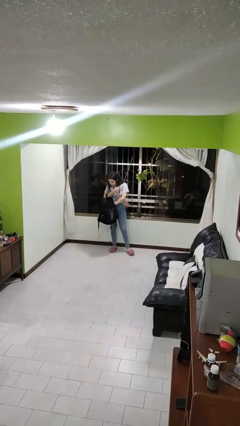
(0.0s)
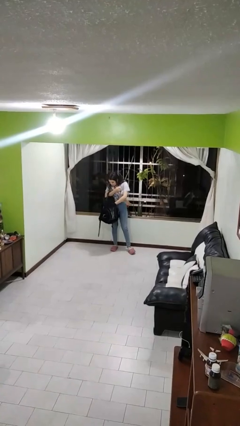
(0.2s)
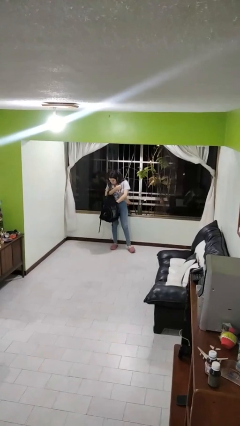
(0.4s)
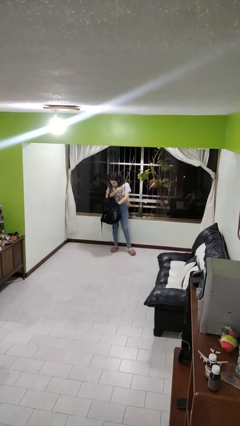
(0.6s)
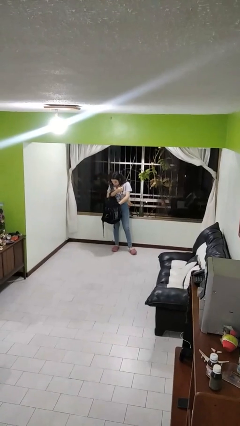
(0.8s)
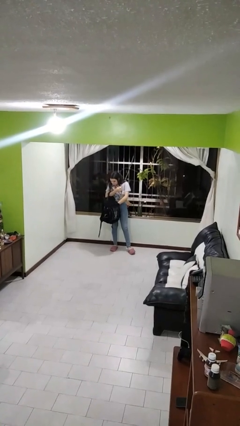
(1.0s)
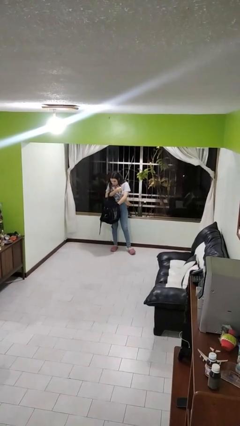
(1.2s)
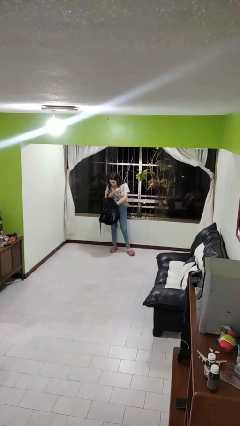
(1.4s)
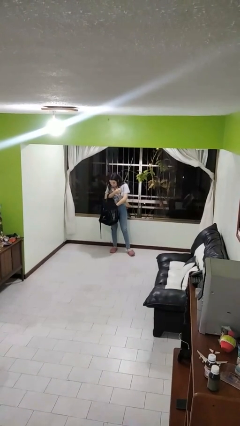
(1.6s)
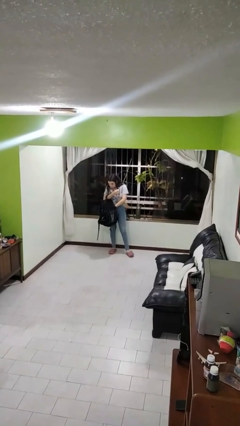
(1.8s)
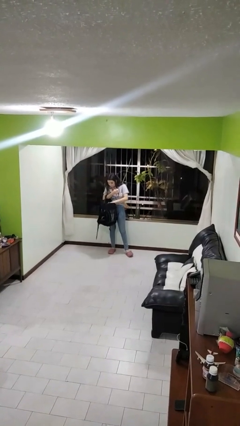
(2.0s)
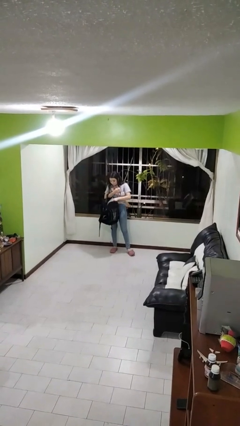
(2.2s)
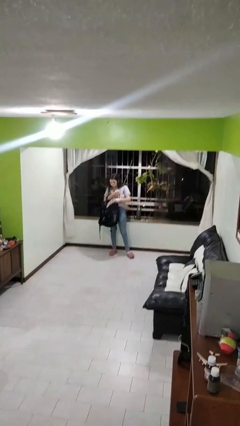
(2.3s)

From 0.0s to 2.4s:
person searches in backpack

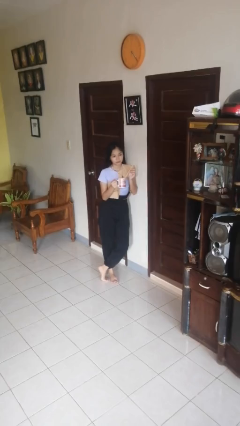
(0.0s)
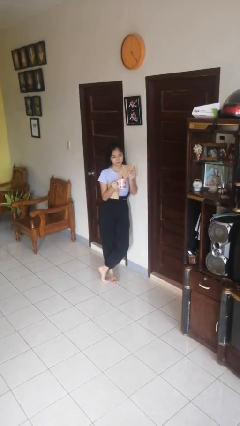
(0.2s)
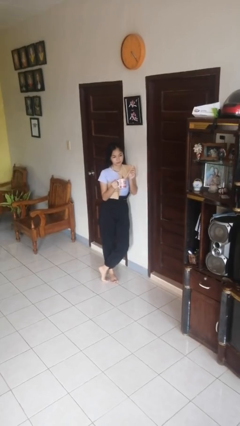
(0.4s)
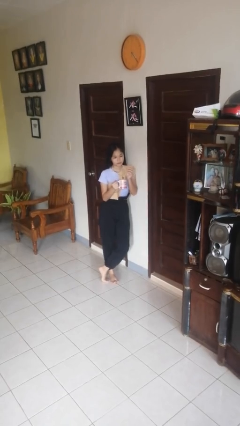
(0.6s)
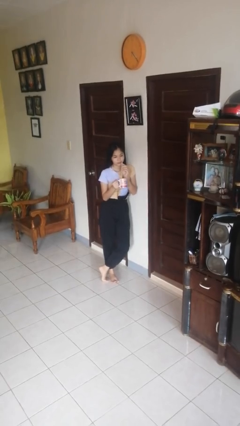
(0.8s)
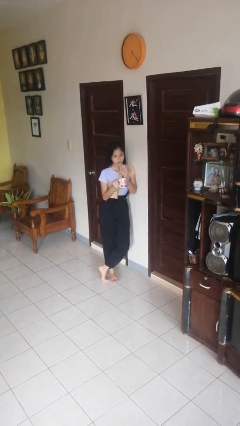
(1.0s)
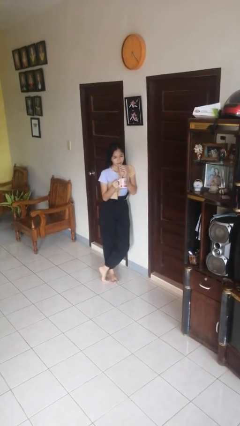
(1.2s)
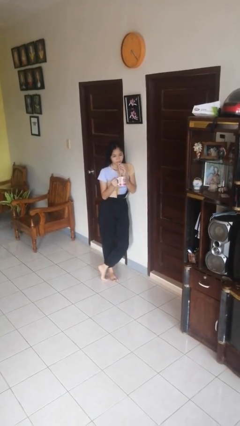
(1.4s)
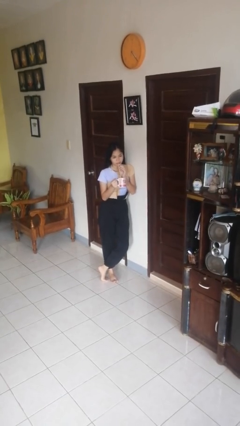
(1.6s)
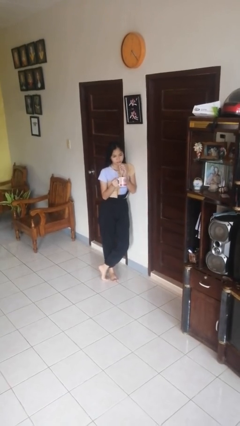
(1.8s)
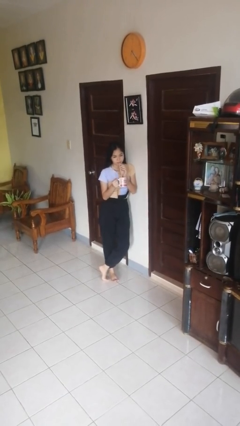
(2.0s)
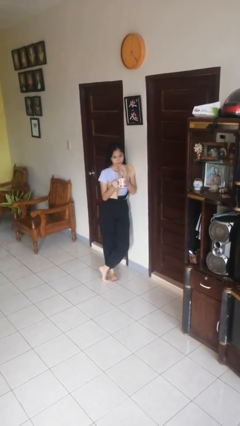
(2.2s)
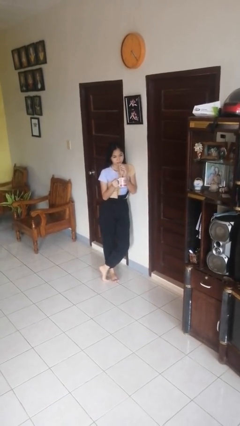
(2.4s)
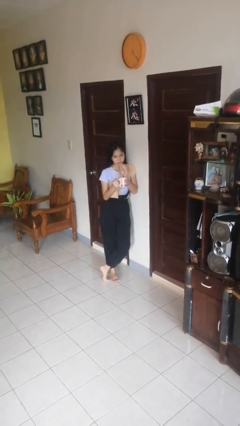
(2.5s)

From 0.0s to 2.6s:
person drinks from straw

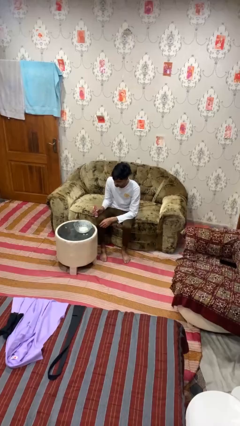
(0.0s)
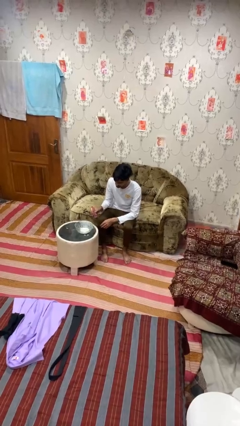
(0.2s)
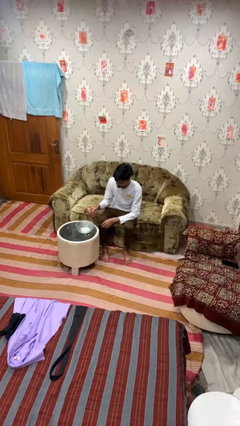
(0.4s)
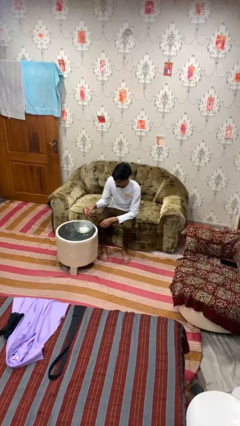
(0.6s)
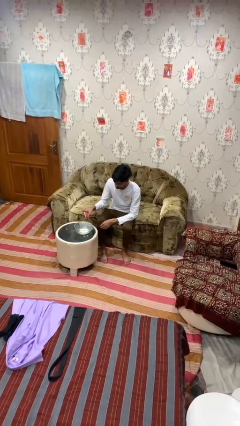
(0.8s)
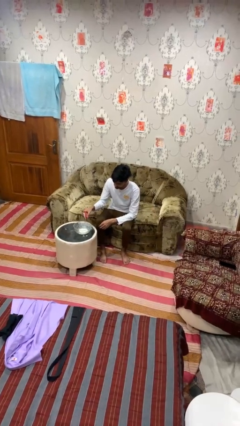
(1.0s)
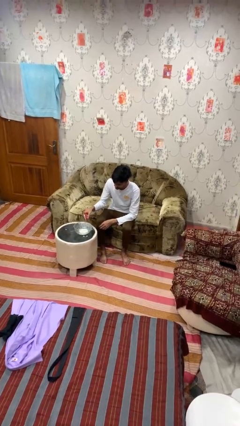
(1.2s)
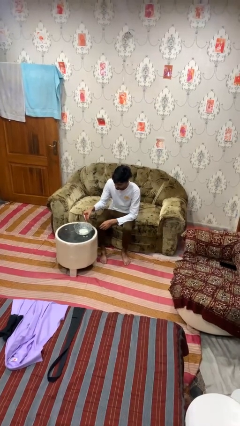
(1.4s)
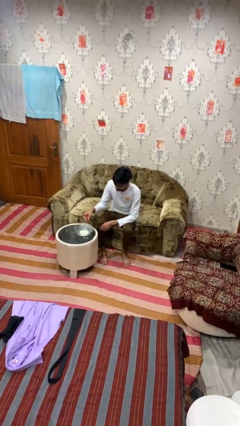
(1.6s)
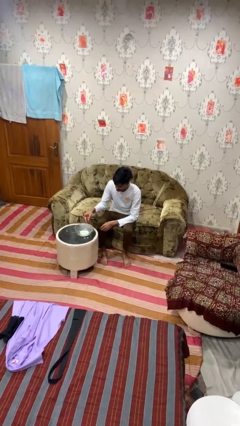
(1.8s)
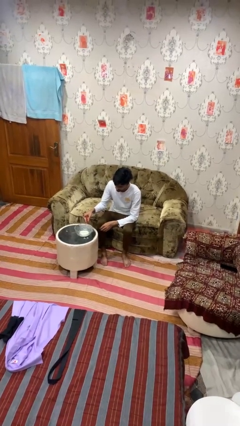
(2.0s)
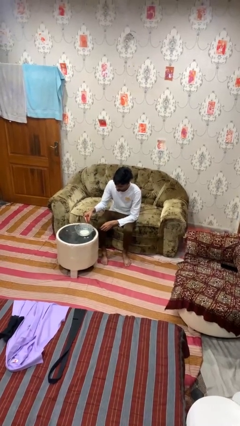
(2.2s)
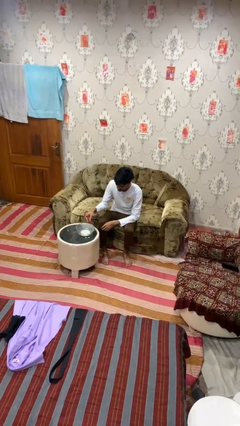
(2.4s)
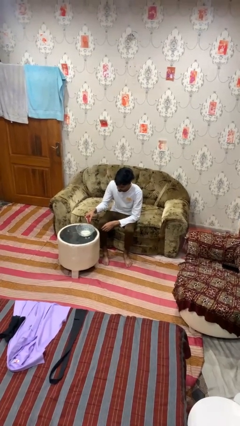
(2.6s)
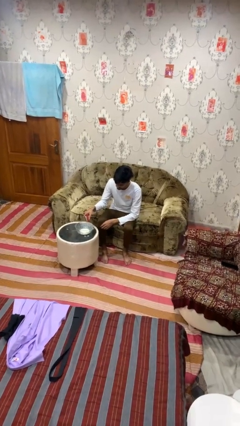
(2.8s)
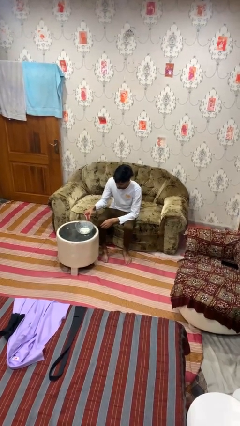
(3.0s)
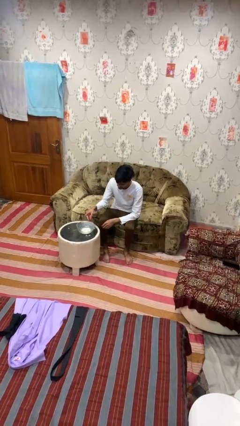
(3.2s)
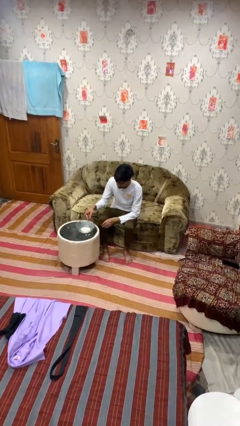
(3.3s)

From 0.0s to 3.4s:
person pours into bowl

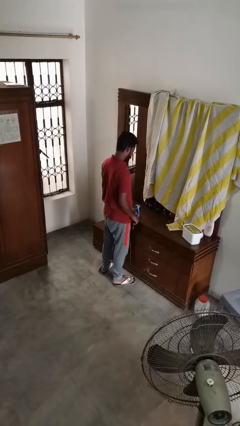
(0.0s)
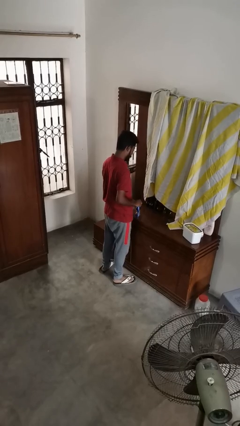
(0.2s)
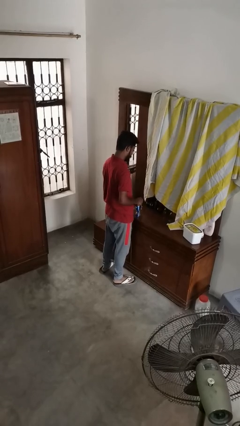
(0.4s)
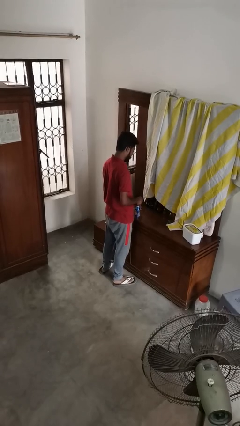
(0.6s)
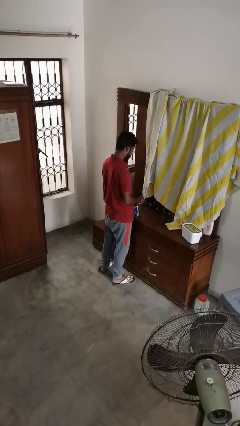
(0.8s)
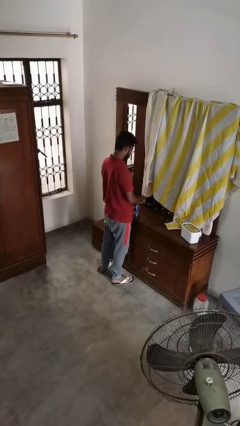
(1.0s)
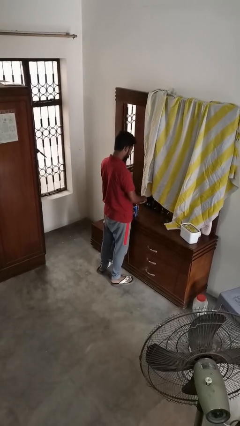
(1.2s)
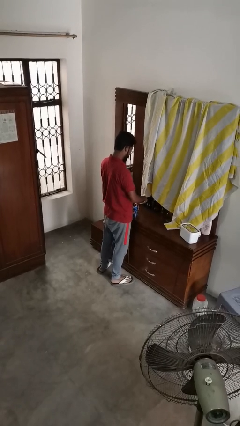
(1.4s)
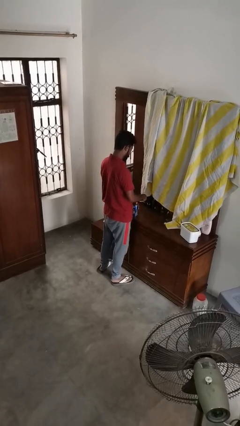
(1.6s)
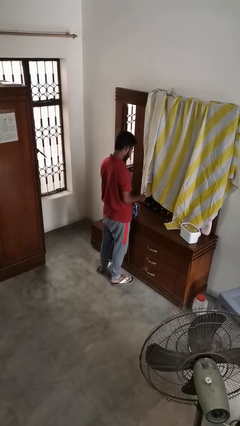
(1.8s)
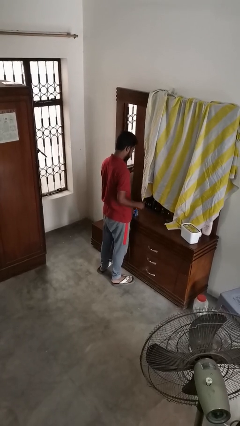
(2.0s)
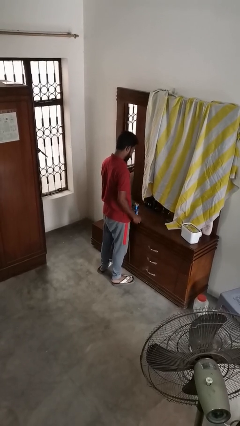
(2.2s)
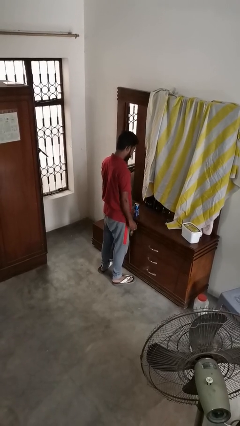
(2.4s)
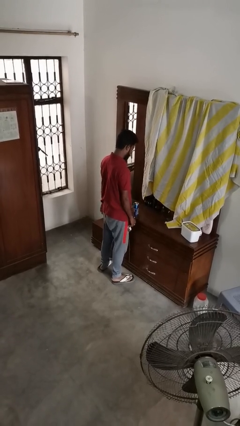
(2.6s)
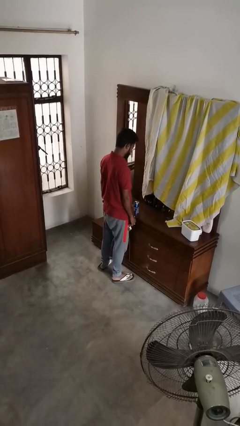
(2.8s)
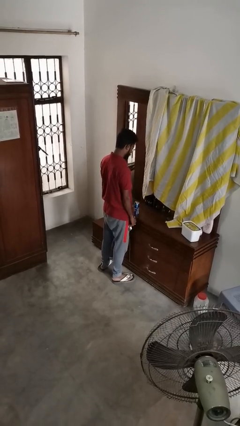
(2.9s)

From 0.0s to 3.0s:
person opens can with can opener

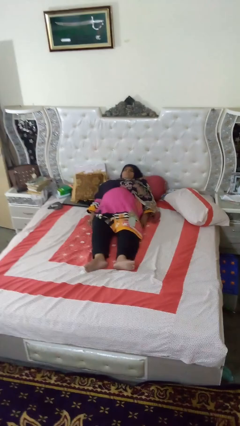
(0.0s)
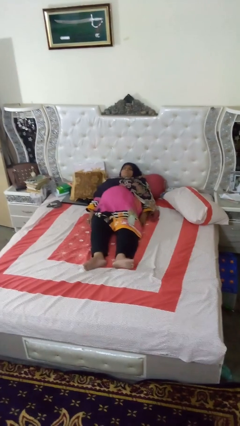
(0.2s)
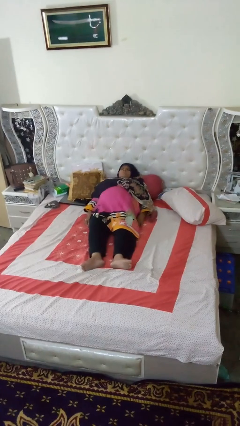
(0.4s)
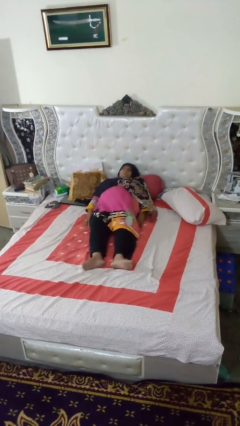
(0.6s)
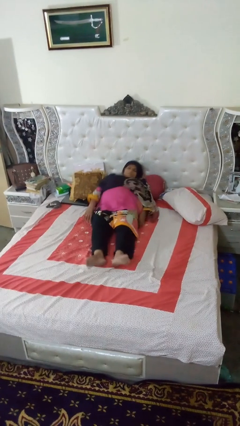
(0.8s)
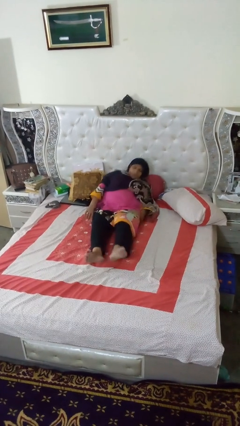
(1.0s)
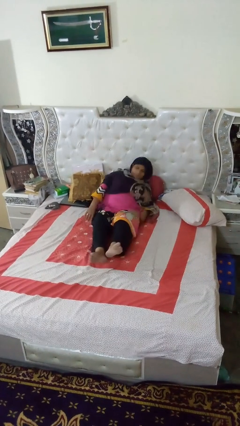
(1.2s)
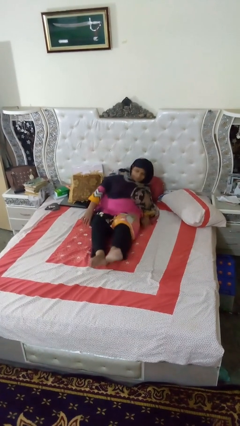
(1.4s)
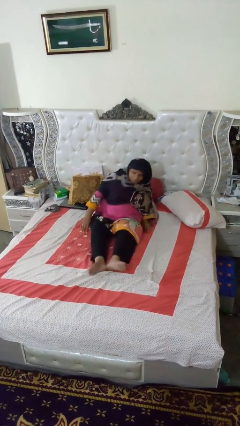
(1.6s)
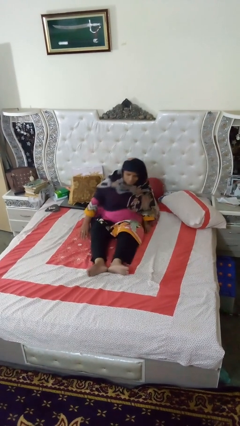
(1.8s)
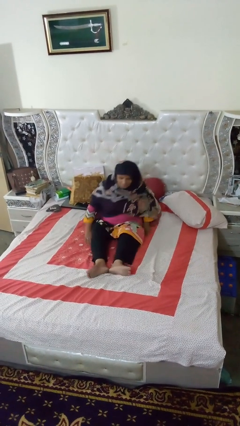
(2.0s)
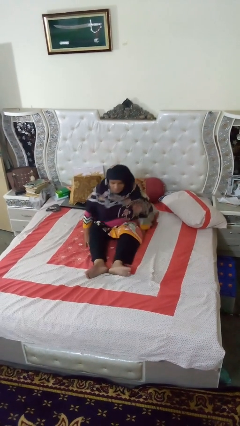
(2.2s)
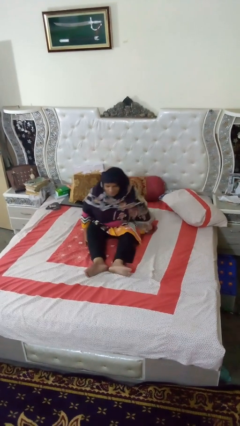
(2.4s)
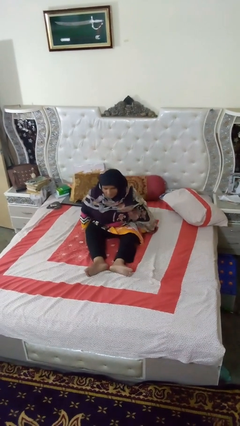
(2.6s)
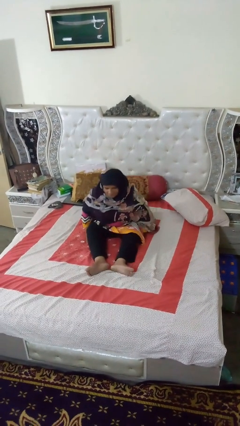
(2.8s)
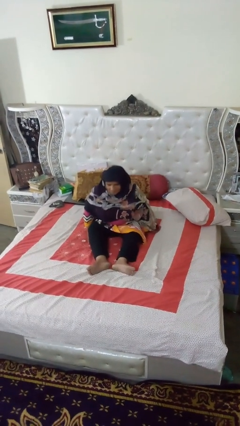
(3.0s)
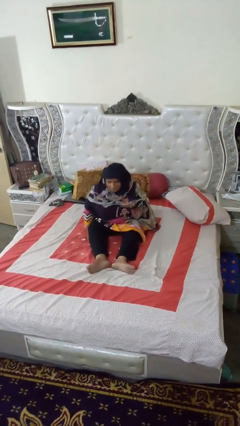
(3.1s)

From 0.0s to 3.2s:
person stands up

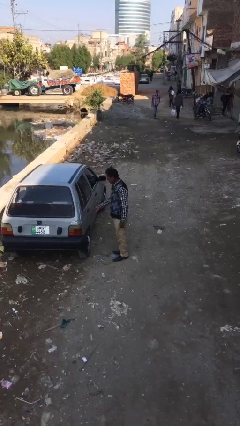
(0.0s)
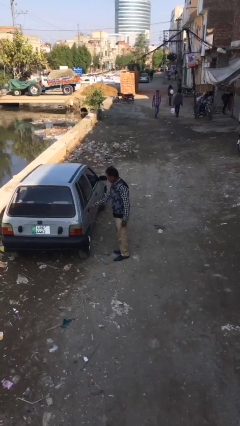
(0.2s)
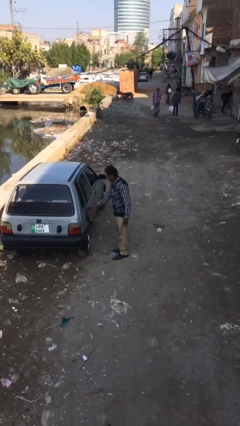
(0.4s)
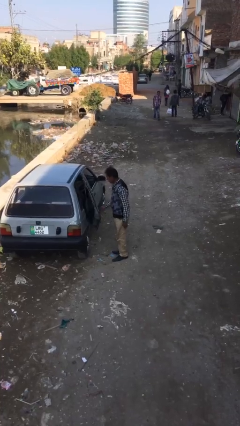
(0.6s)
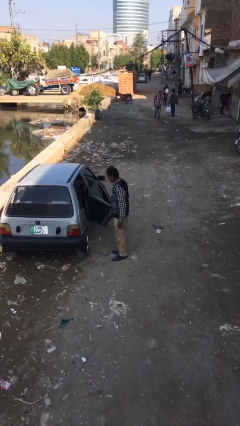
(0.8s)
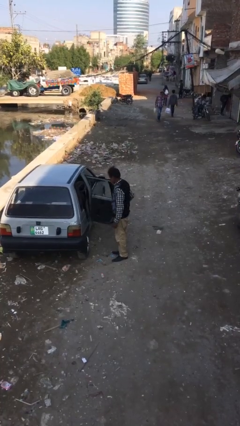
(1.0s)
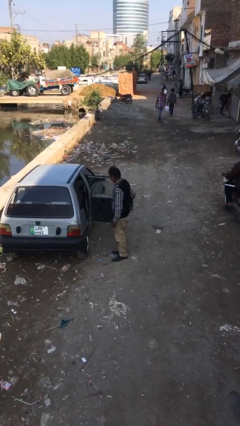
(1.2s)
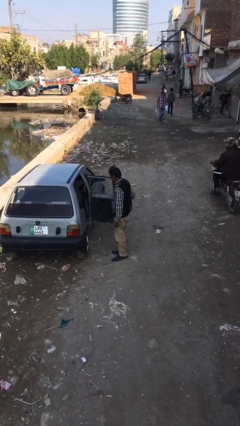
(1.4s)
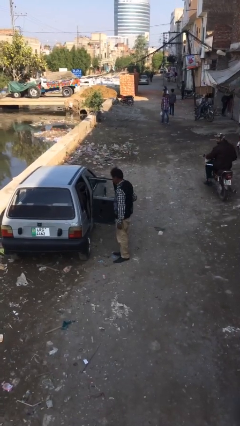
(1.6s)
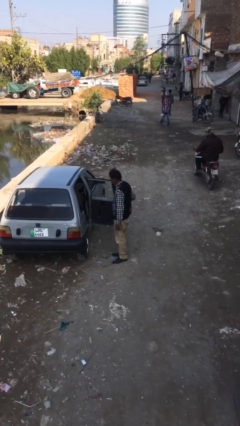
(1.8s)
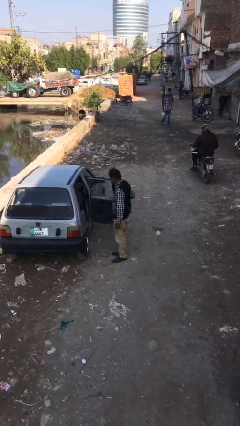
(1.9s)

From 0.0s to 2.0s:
person opens car door

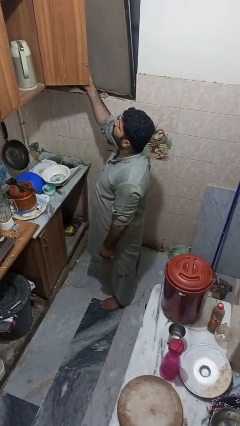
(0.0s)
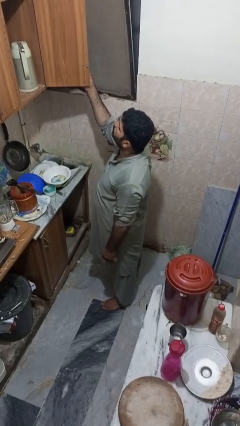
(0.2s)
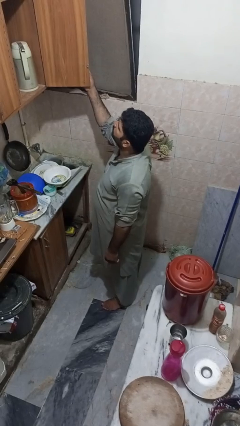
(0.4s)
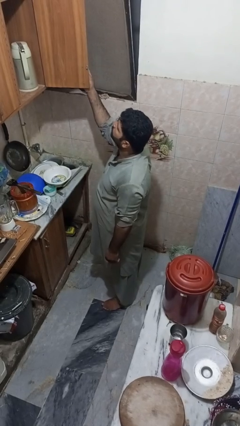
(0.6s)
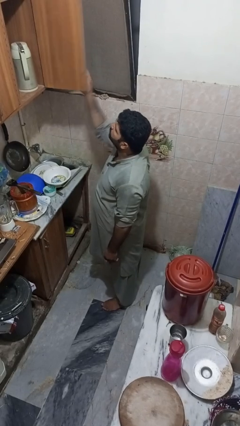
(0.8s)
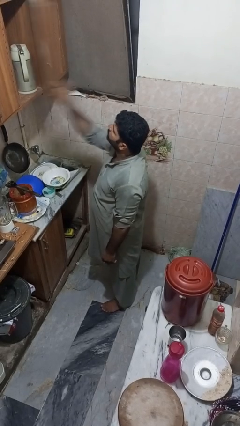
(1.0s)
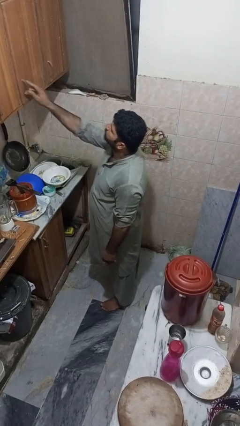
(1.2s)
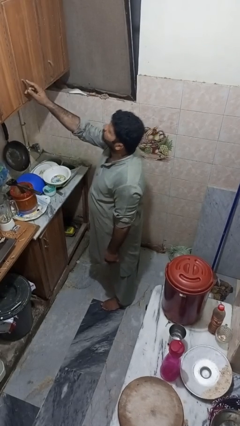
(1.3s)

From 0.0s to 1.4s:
person closes cabinet
